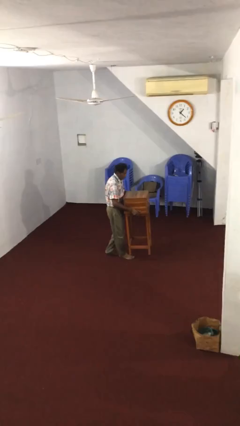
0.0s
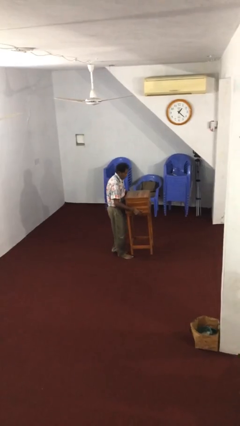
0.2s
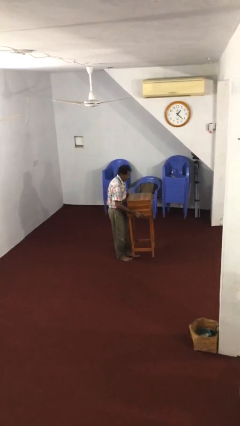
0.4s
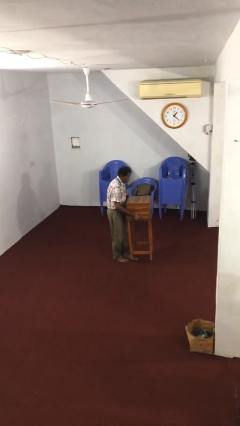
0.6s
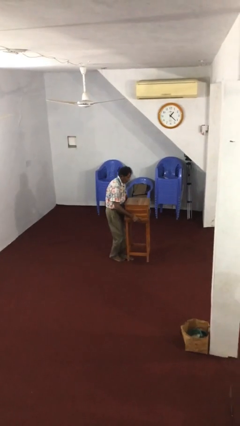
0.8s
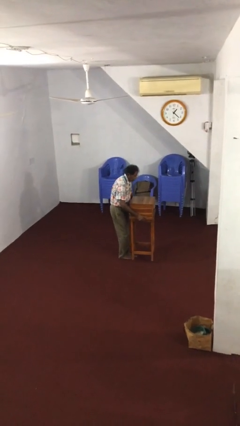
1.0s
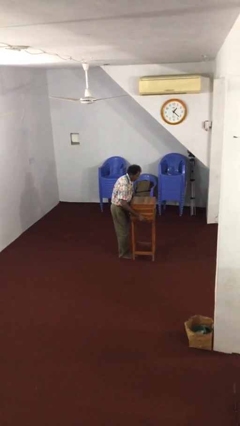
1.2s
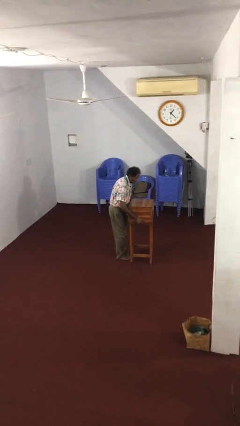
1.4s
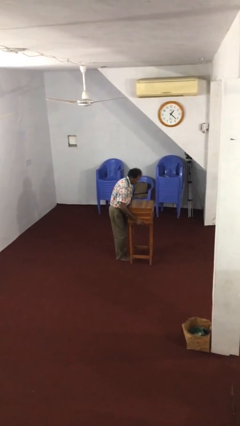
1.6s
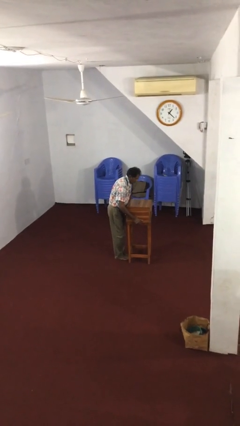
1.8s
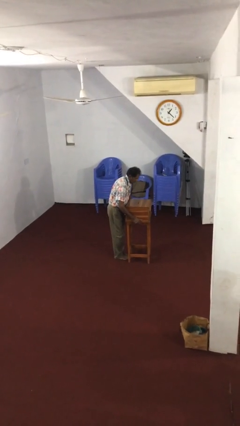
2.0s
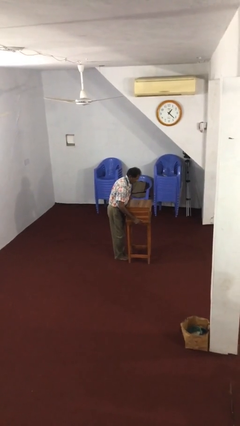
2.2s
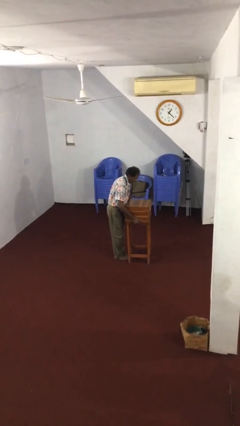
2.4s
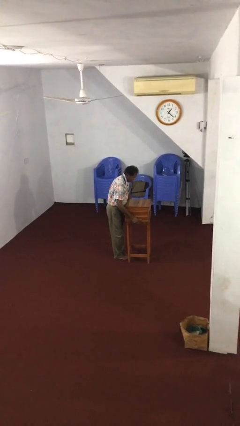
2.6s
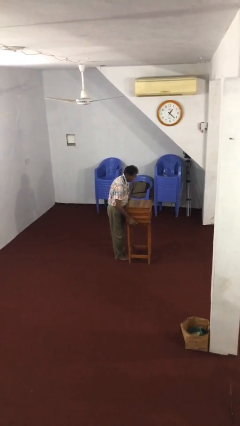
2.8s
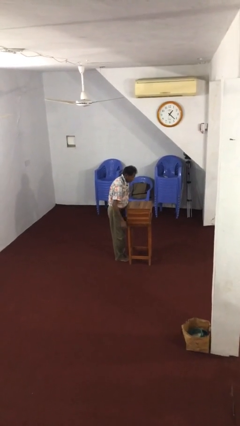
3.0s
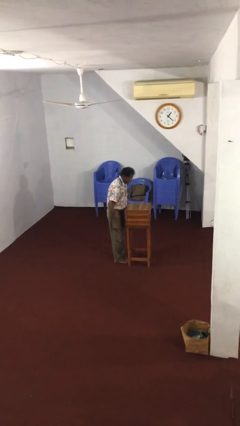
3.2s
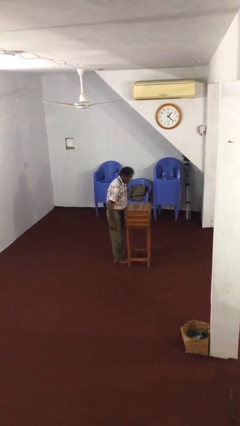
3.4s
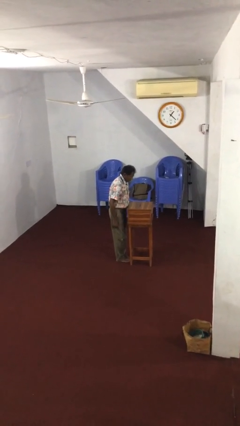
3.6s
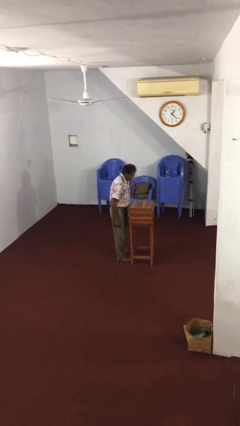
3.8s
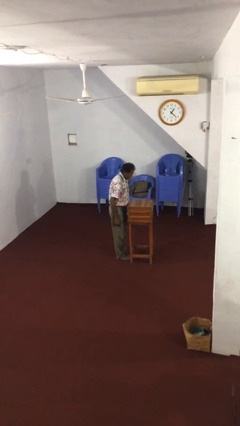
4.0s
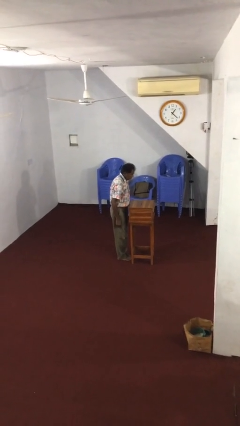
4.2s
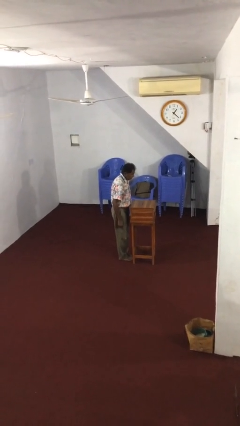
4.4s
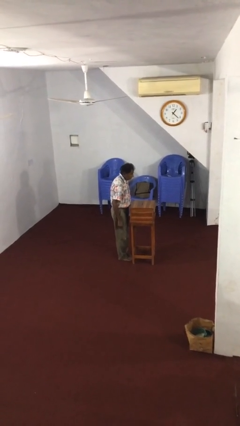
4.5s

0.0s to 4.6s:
person puts down object on floor

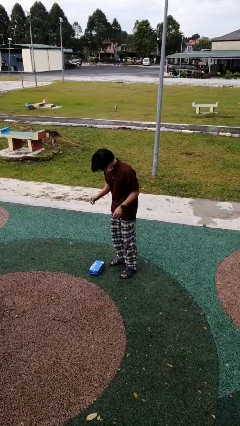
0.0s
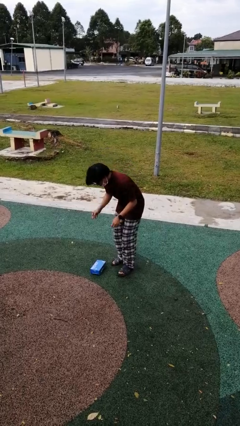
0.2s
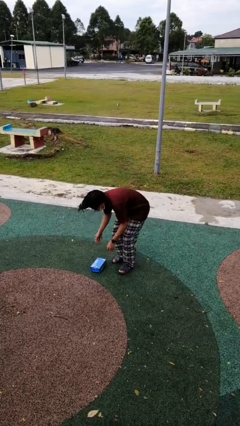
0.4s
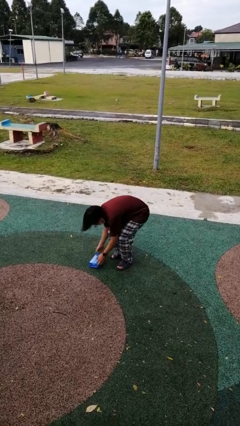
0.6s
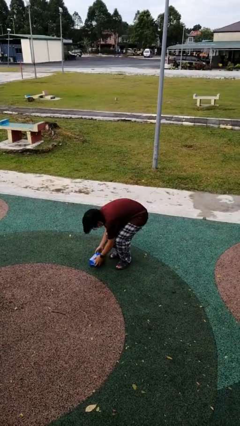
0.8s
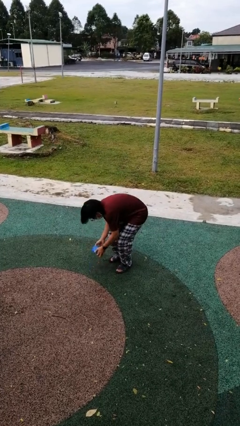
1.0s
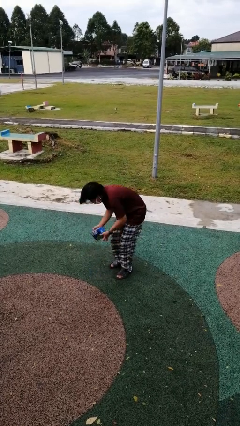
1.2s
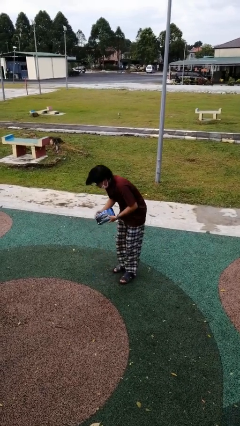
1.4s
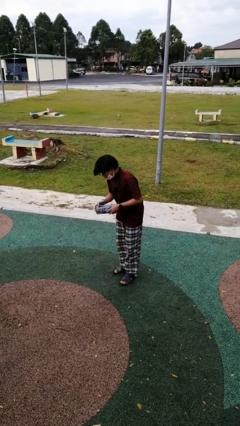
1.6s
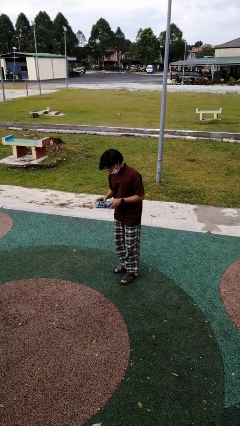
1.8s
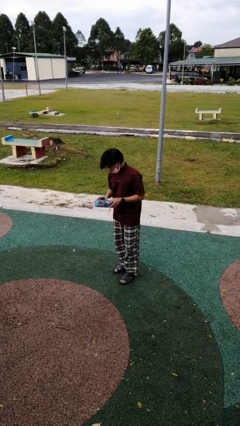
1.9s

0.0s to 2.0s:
person picks up object from floor

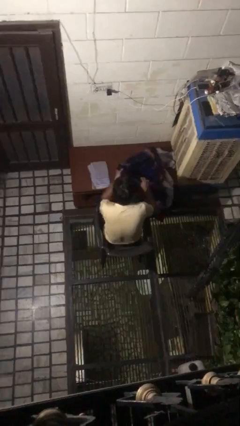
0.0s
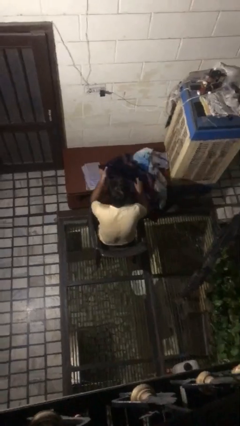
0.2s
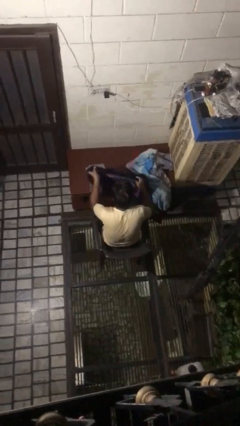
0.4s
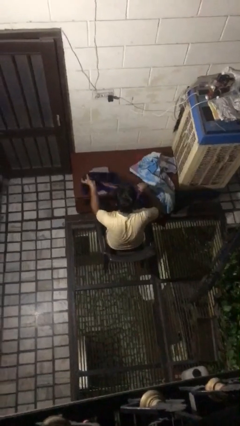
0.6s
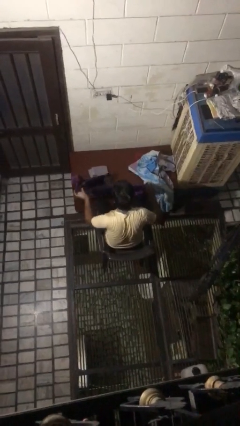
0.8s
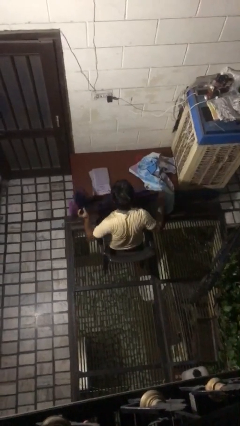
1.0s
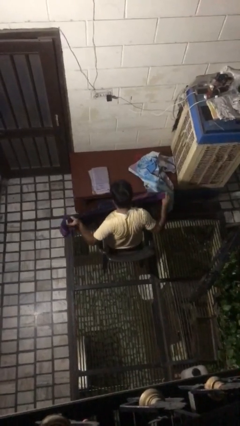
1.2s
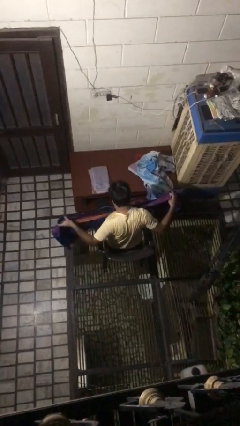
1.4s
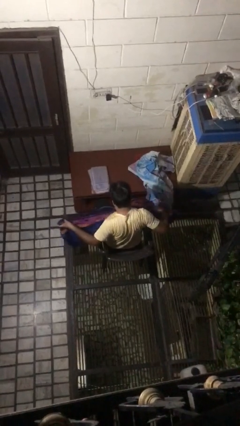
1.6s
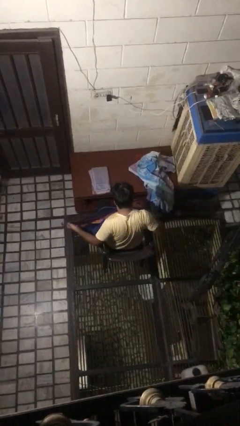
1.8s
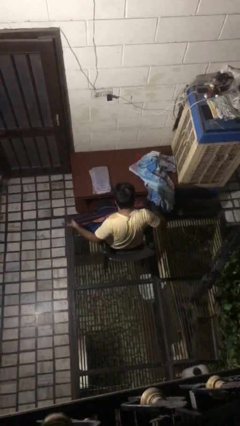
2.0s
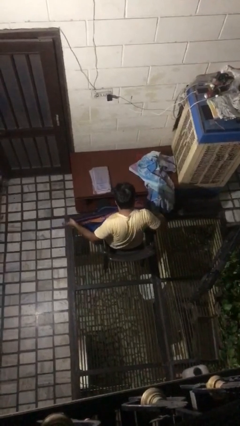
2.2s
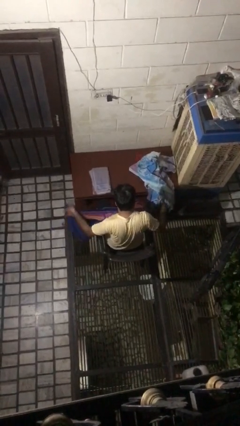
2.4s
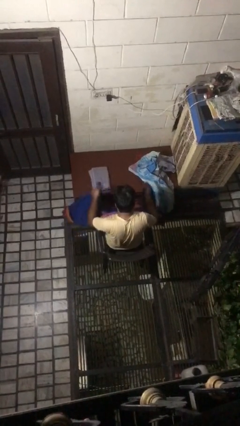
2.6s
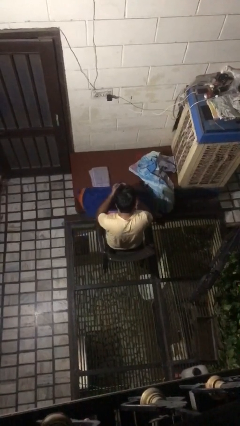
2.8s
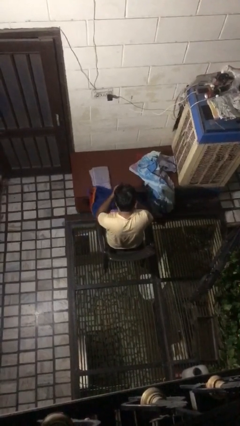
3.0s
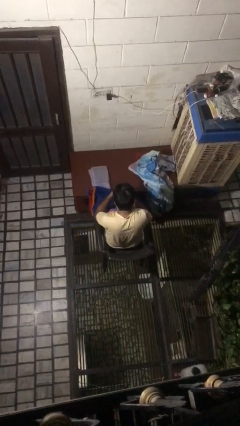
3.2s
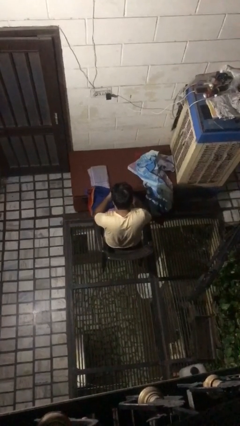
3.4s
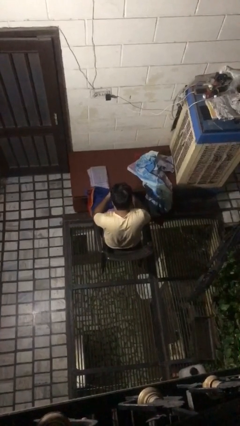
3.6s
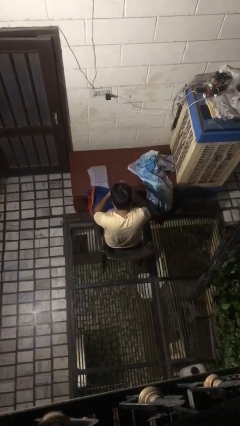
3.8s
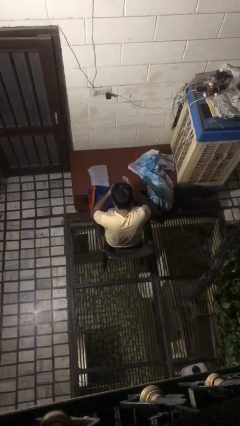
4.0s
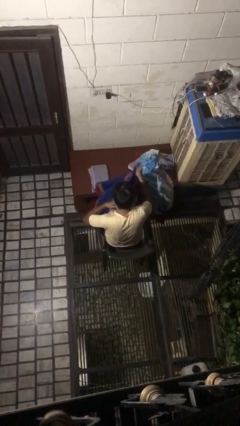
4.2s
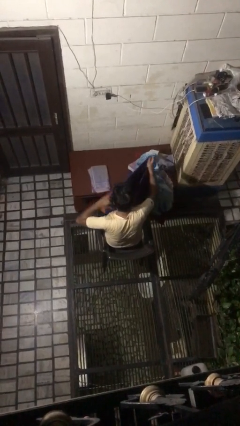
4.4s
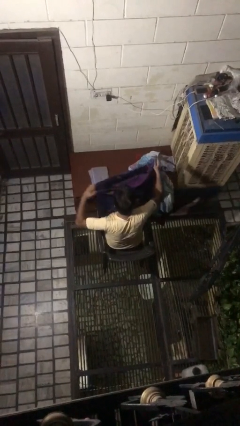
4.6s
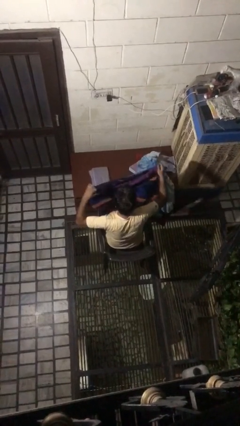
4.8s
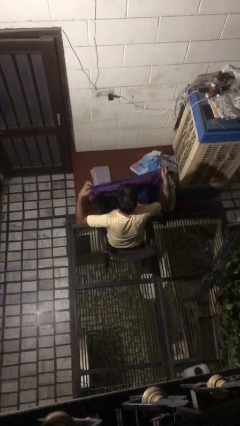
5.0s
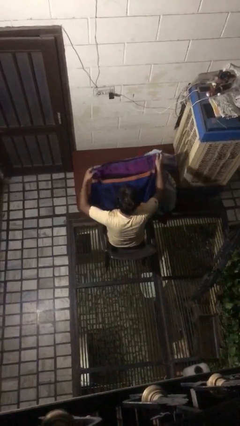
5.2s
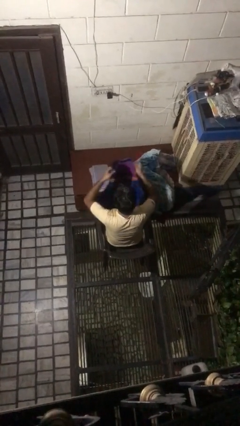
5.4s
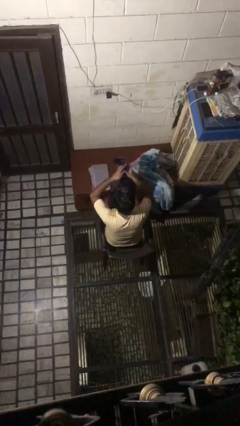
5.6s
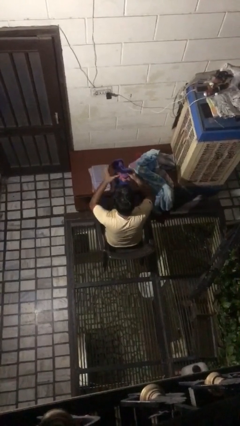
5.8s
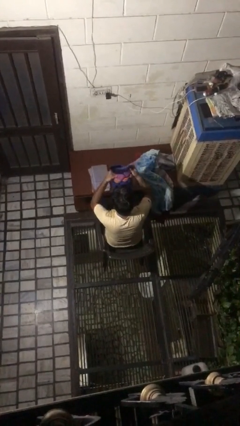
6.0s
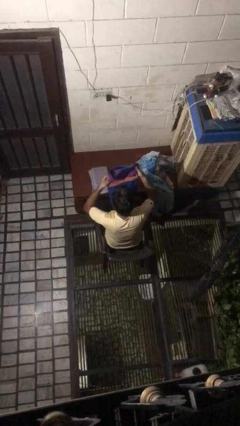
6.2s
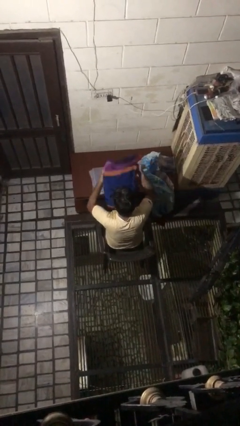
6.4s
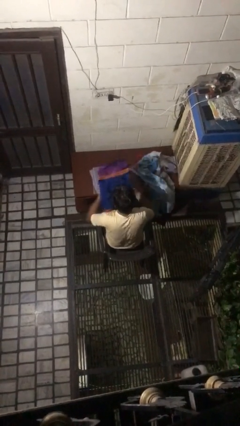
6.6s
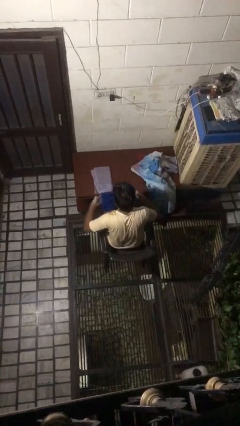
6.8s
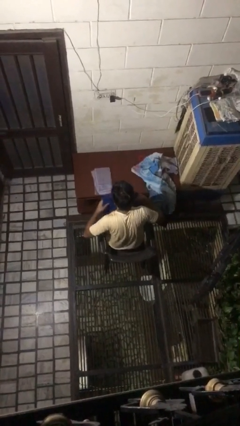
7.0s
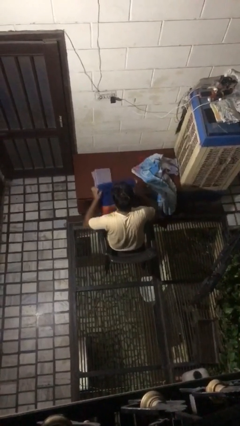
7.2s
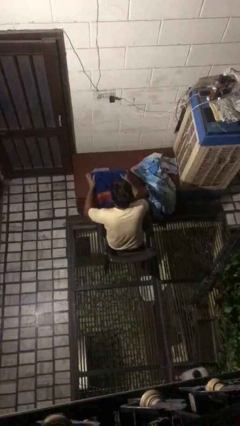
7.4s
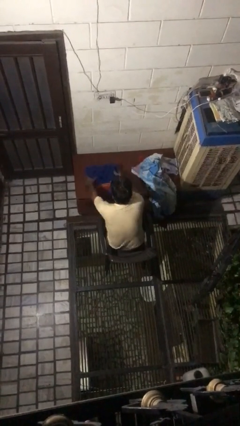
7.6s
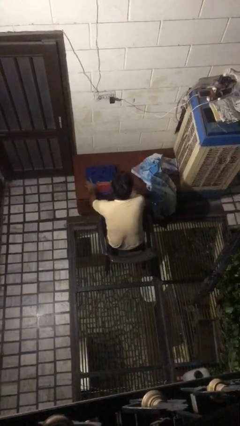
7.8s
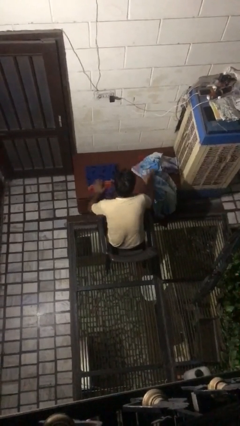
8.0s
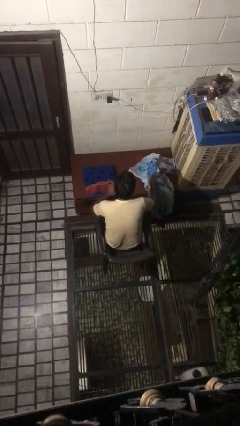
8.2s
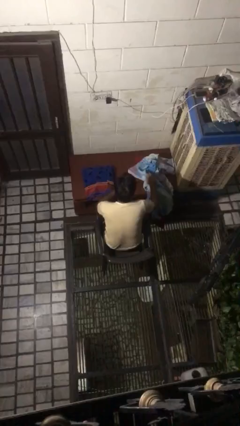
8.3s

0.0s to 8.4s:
person folds towel

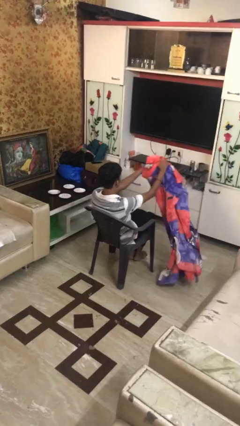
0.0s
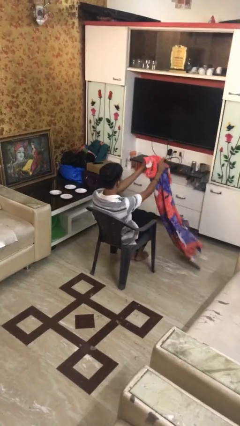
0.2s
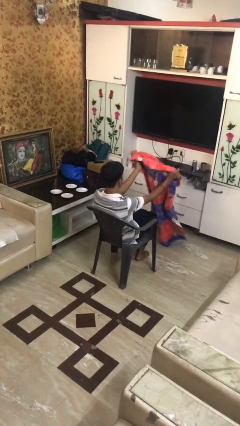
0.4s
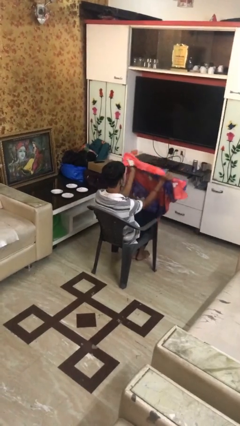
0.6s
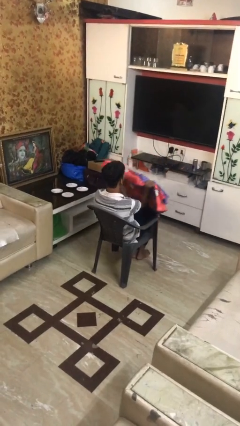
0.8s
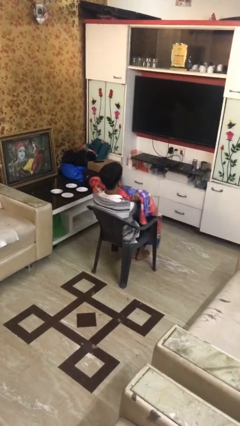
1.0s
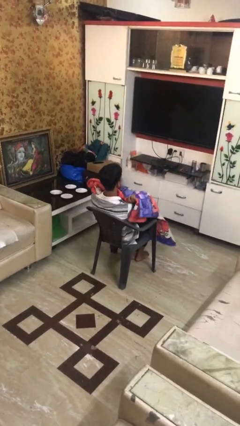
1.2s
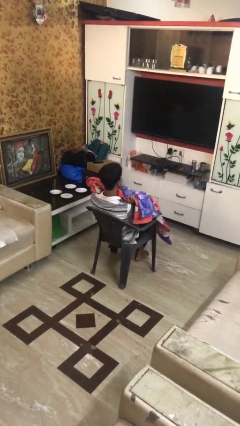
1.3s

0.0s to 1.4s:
person covers with blanket

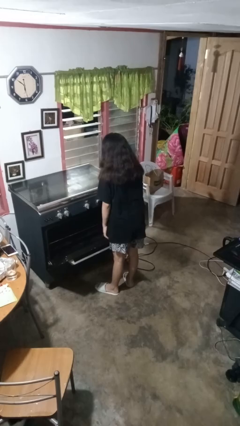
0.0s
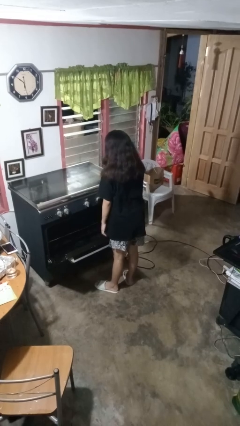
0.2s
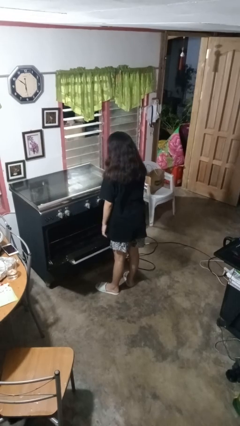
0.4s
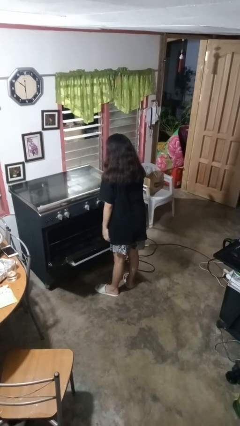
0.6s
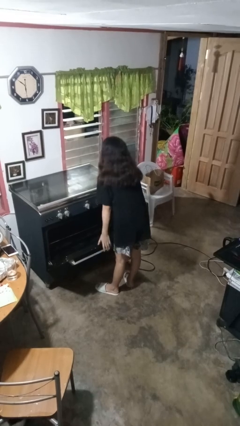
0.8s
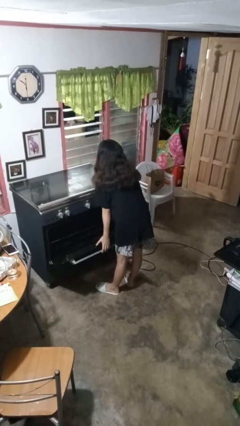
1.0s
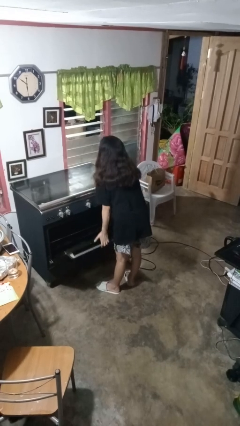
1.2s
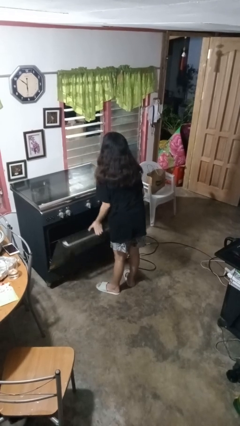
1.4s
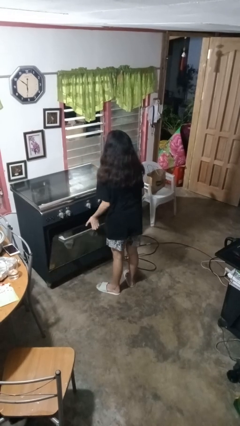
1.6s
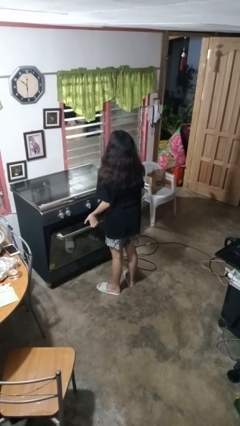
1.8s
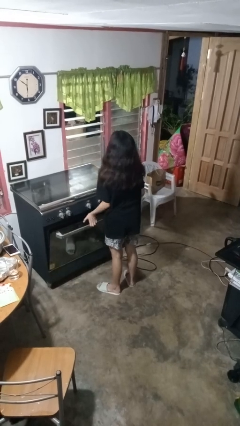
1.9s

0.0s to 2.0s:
person closes oven door
